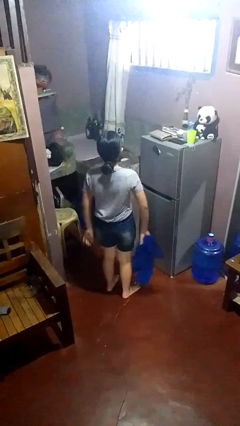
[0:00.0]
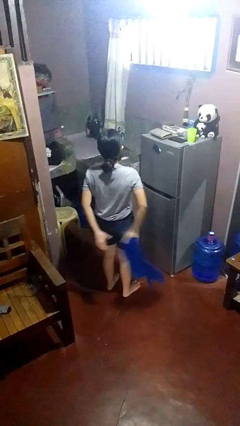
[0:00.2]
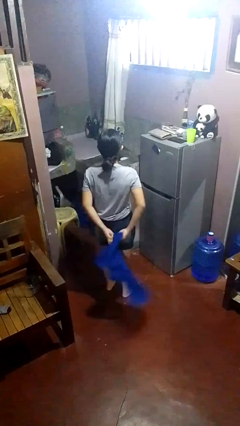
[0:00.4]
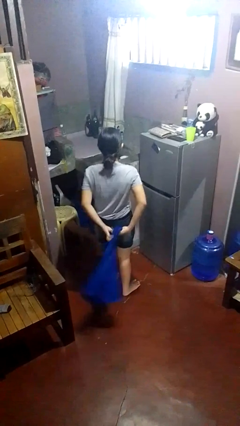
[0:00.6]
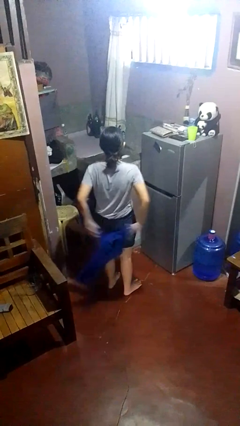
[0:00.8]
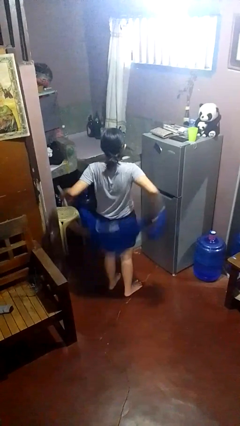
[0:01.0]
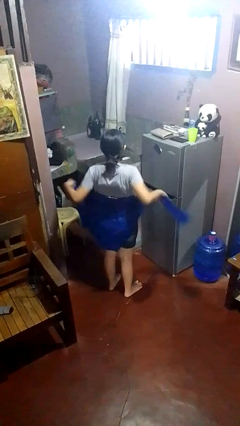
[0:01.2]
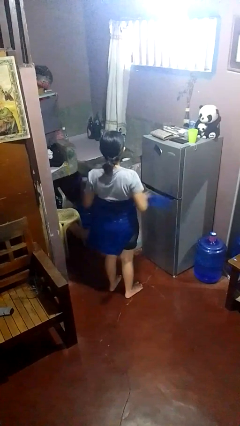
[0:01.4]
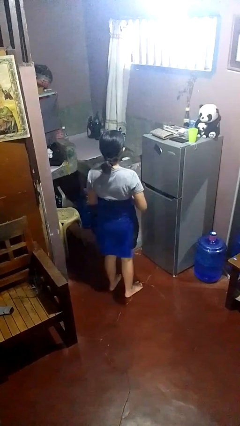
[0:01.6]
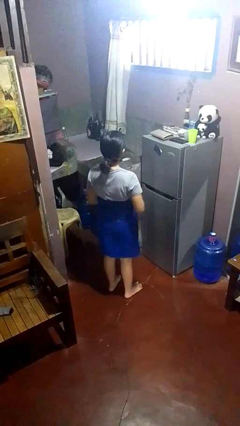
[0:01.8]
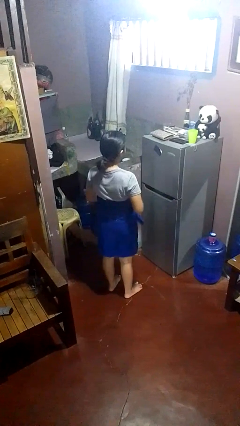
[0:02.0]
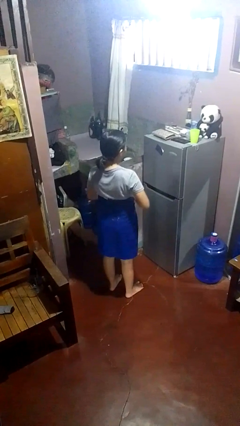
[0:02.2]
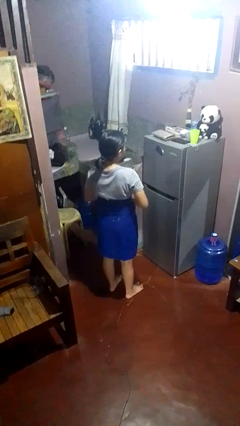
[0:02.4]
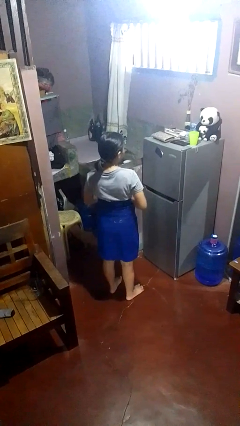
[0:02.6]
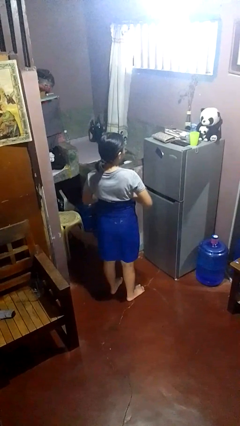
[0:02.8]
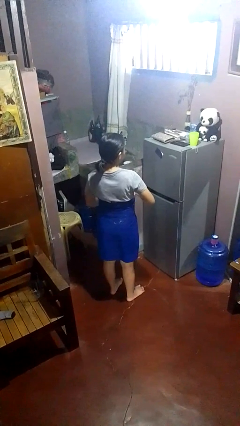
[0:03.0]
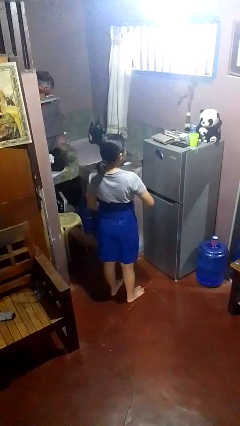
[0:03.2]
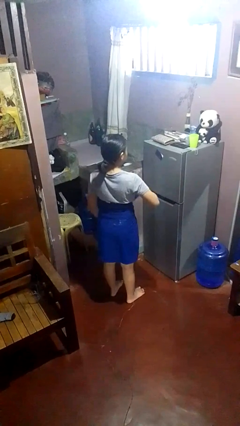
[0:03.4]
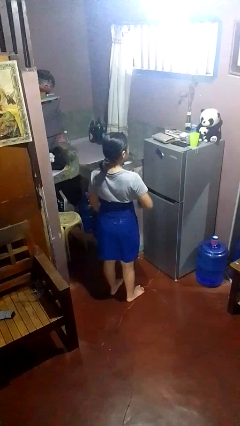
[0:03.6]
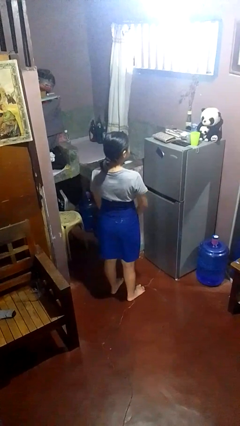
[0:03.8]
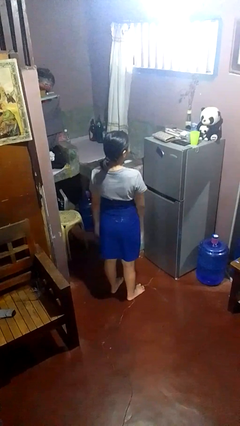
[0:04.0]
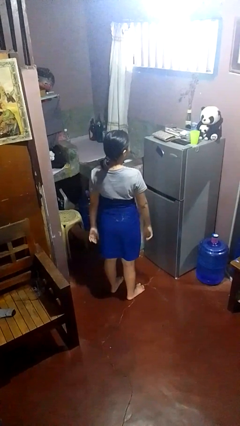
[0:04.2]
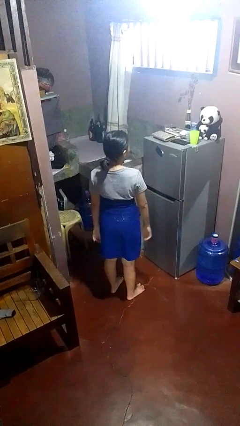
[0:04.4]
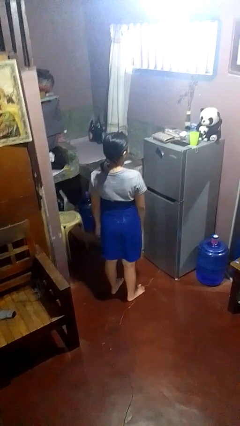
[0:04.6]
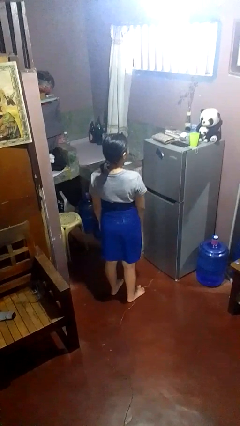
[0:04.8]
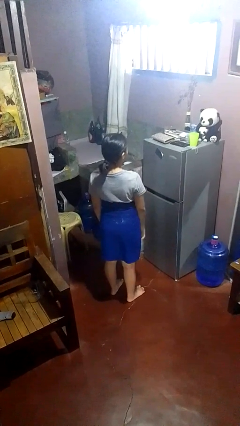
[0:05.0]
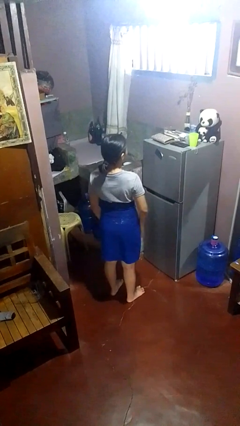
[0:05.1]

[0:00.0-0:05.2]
person ties jacket around waist

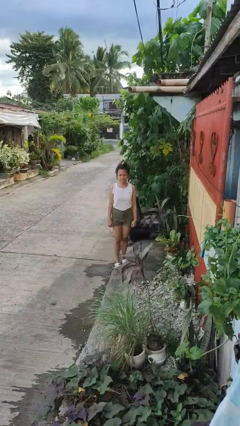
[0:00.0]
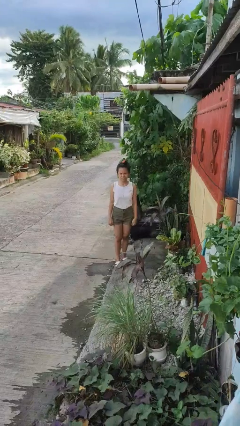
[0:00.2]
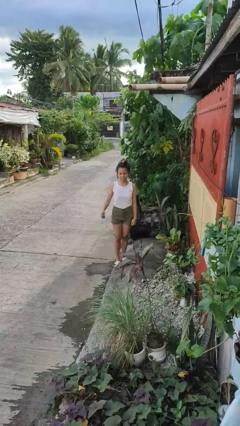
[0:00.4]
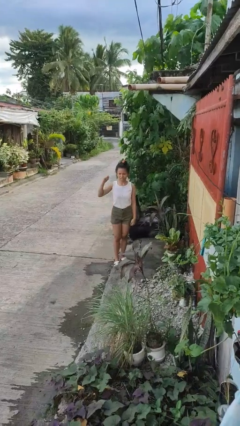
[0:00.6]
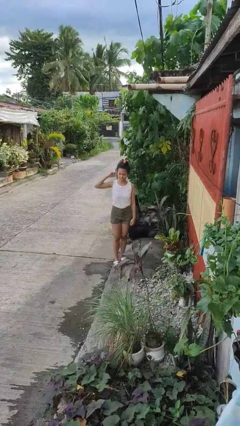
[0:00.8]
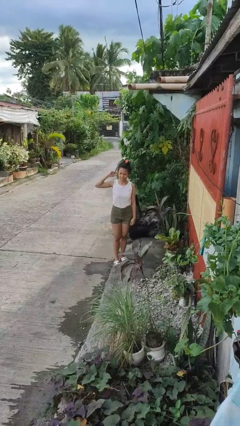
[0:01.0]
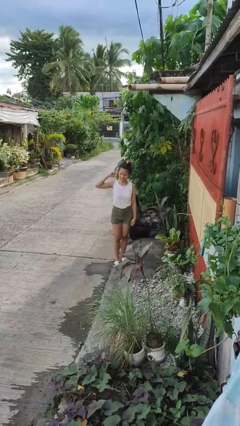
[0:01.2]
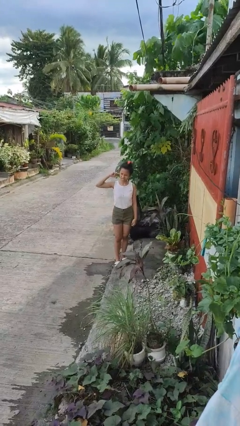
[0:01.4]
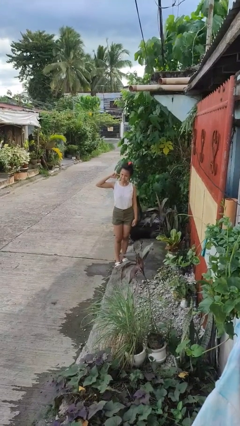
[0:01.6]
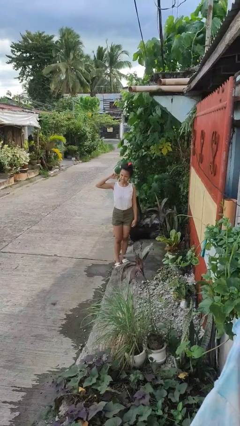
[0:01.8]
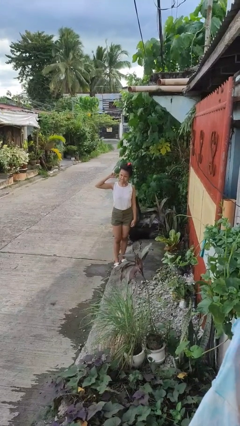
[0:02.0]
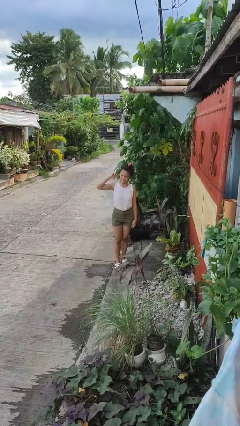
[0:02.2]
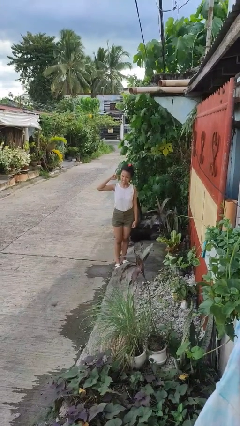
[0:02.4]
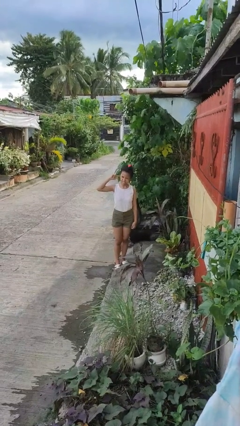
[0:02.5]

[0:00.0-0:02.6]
person touches earlobe

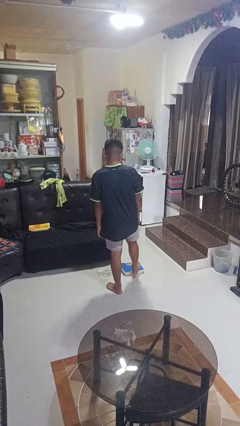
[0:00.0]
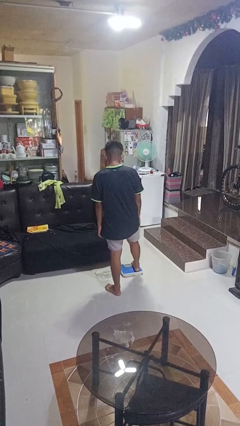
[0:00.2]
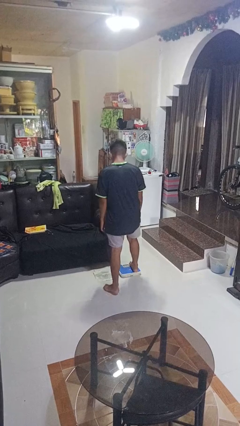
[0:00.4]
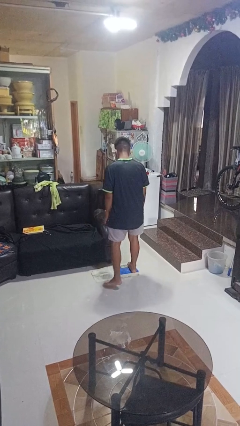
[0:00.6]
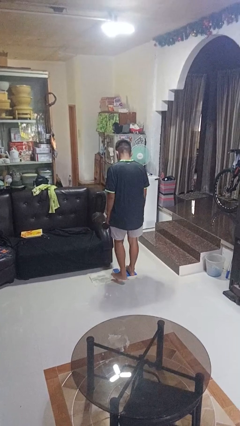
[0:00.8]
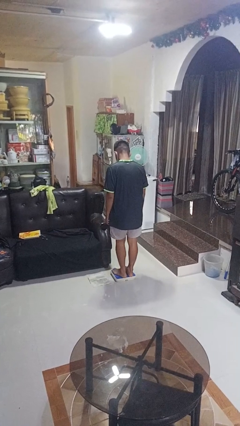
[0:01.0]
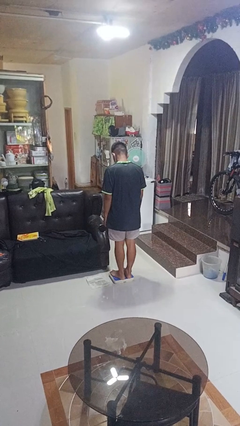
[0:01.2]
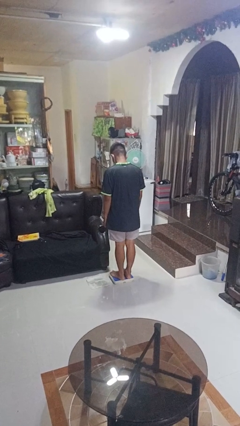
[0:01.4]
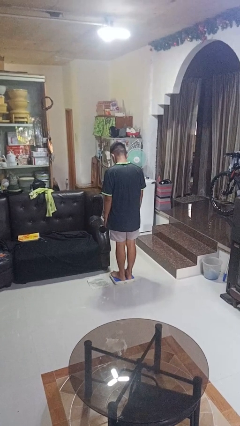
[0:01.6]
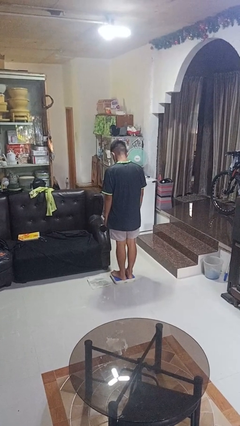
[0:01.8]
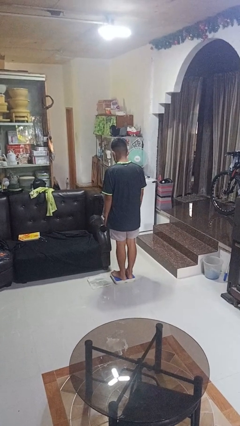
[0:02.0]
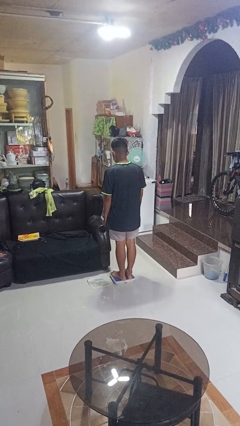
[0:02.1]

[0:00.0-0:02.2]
person uses bodyweight scale

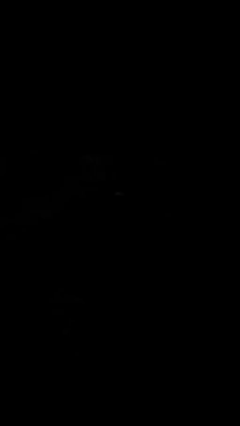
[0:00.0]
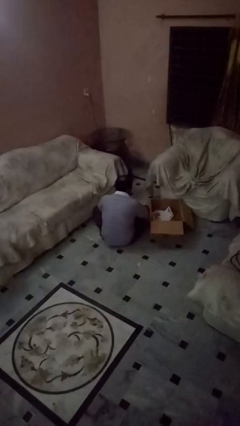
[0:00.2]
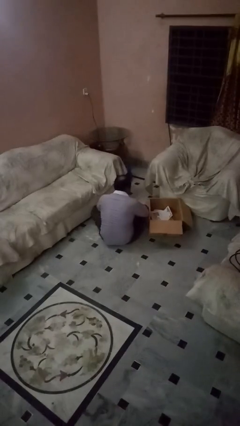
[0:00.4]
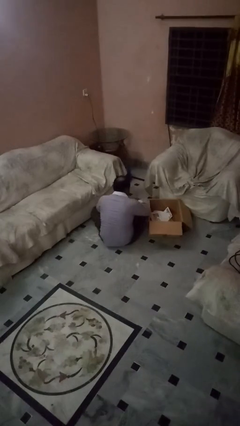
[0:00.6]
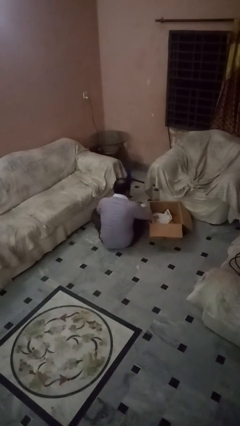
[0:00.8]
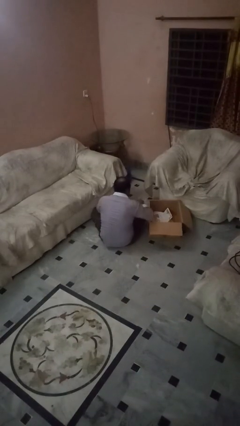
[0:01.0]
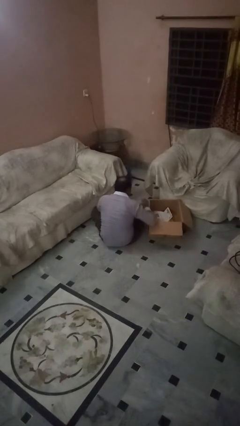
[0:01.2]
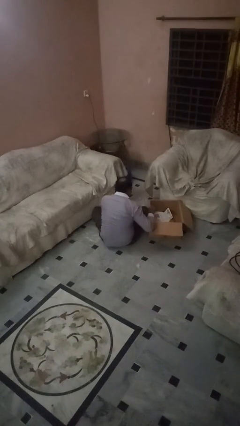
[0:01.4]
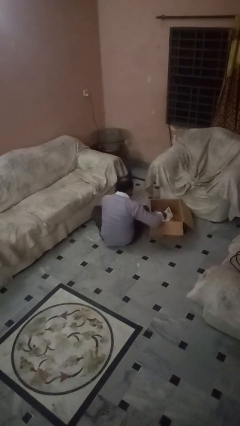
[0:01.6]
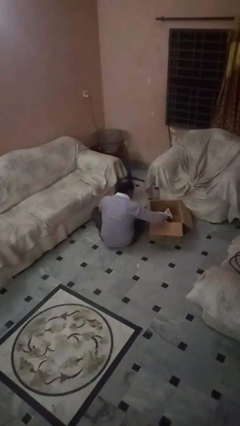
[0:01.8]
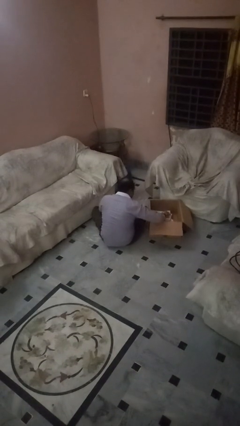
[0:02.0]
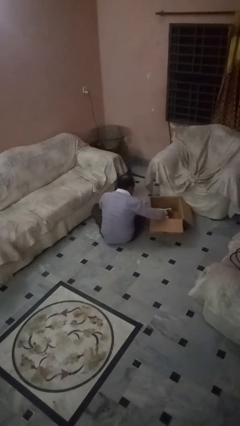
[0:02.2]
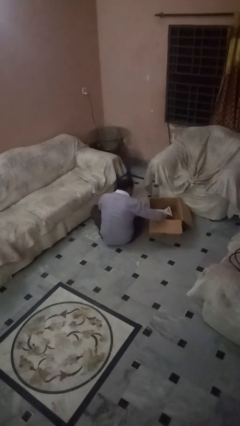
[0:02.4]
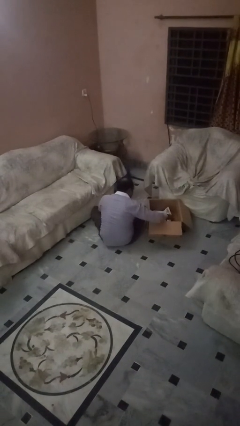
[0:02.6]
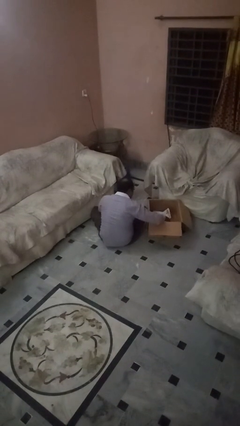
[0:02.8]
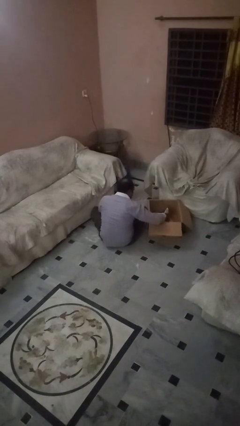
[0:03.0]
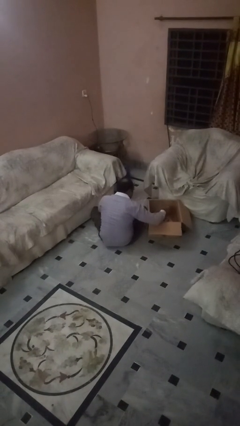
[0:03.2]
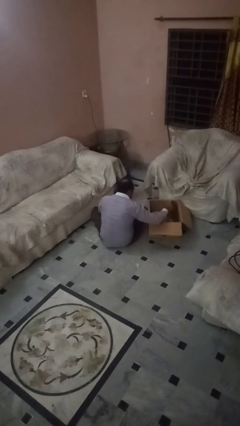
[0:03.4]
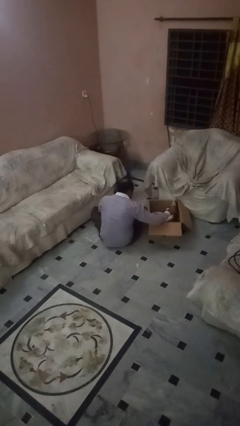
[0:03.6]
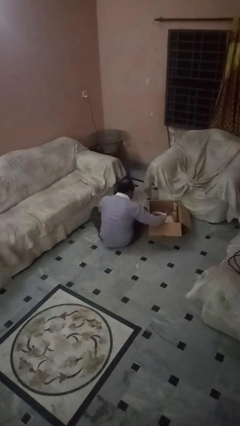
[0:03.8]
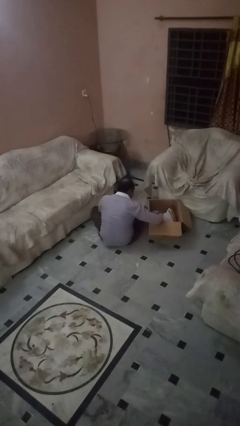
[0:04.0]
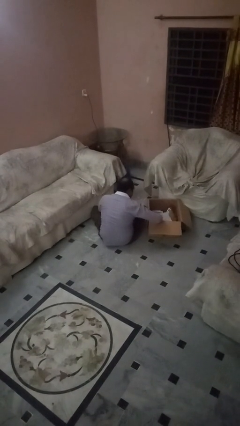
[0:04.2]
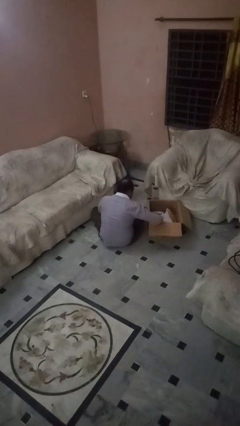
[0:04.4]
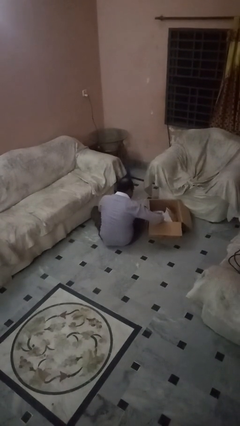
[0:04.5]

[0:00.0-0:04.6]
person searches in box

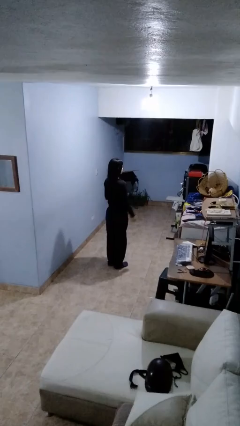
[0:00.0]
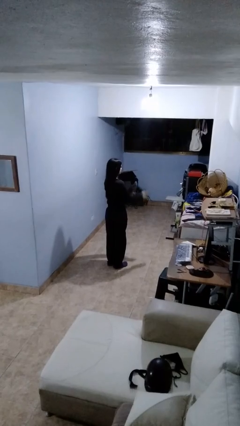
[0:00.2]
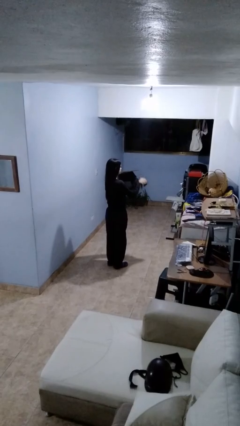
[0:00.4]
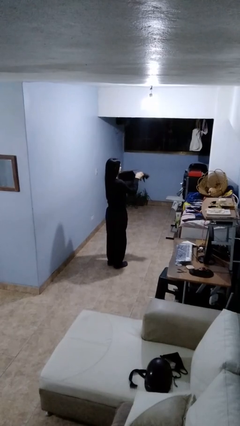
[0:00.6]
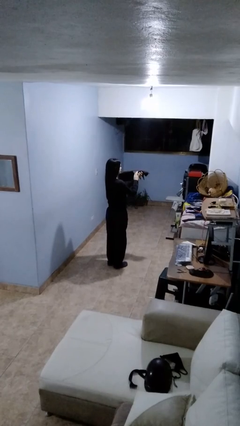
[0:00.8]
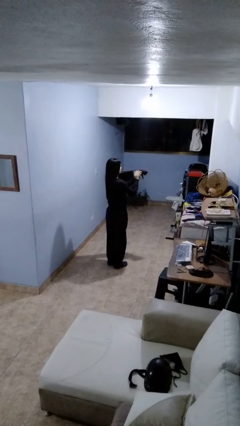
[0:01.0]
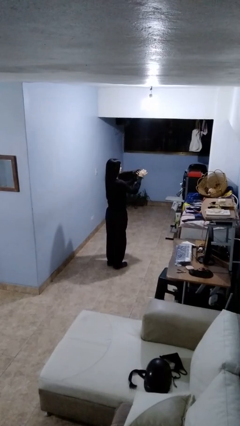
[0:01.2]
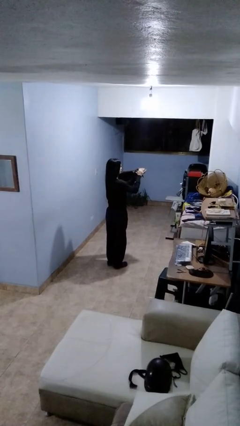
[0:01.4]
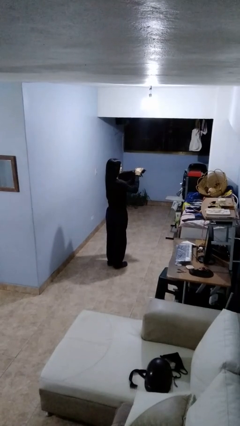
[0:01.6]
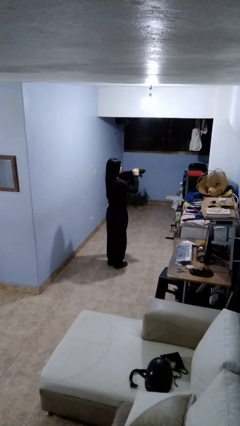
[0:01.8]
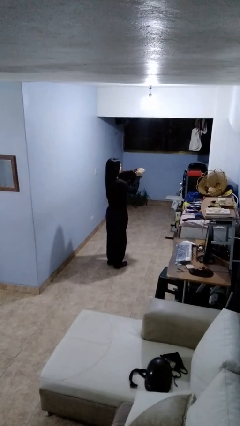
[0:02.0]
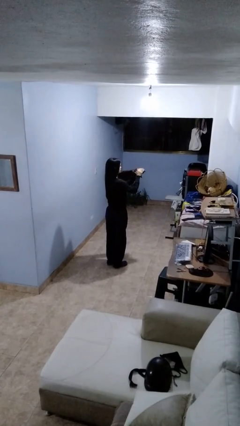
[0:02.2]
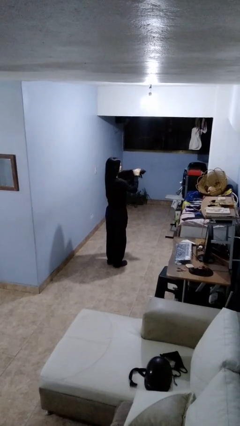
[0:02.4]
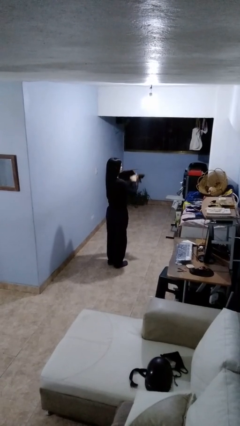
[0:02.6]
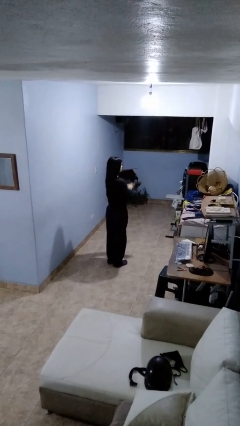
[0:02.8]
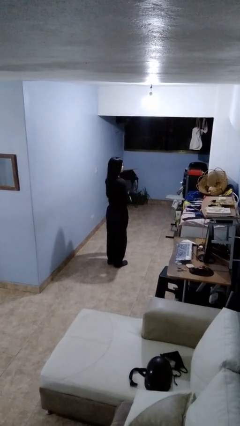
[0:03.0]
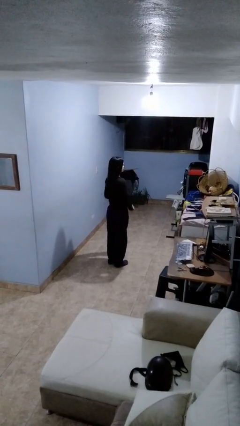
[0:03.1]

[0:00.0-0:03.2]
person pets cat
